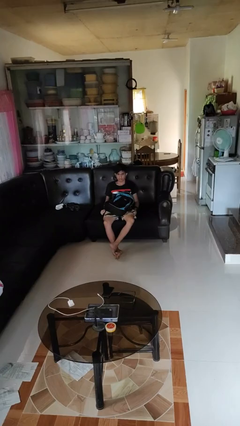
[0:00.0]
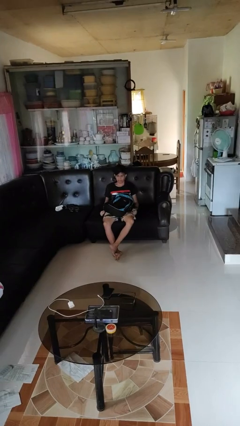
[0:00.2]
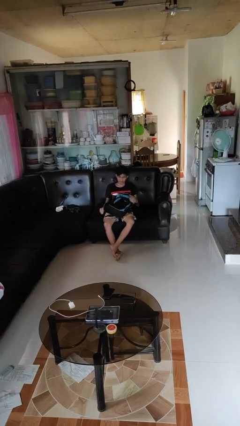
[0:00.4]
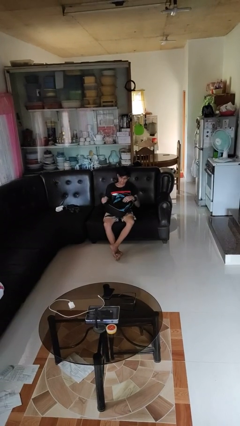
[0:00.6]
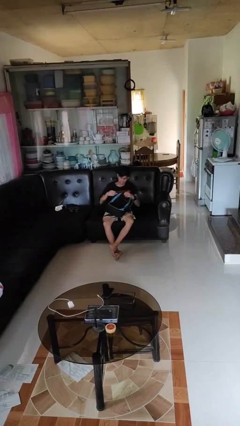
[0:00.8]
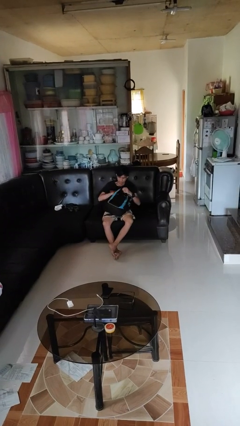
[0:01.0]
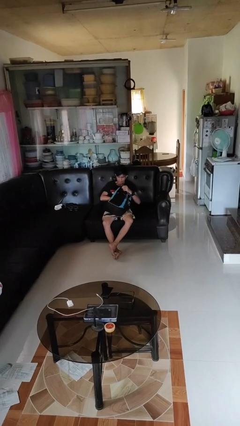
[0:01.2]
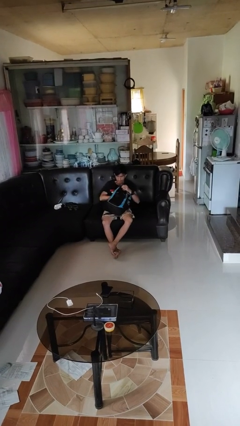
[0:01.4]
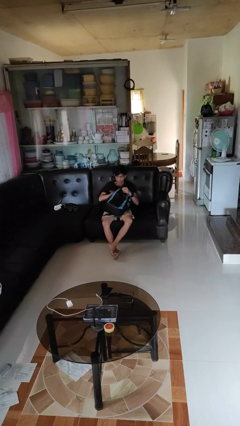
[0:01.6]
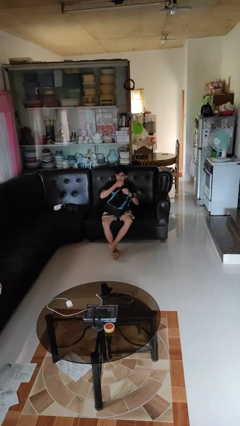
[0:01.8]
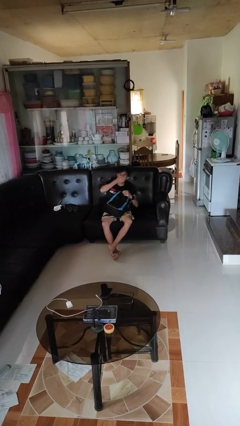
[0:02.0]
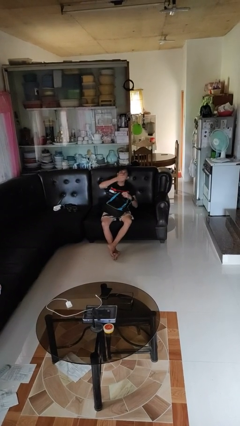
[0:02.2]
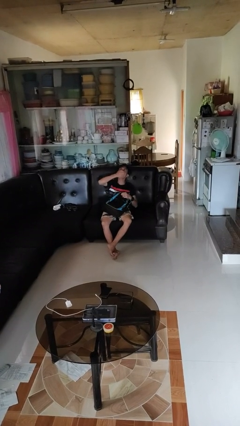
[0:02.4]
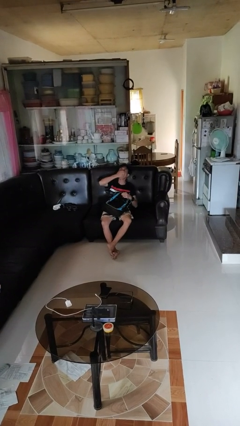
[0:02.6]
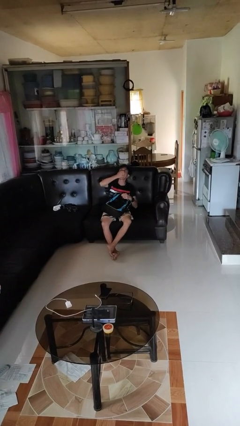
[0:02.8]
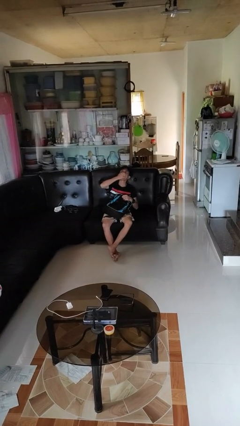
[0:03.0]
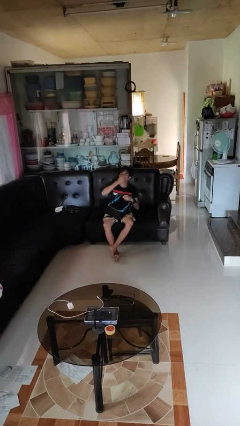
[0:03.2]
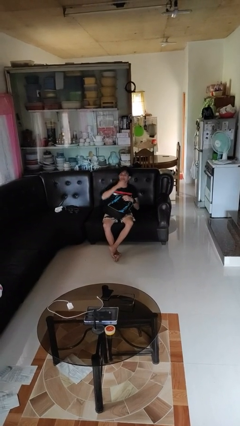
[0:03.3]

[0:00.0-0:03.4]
person eats snack from bag

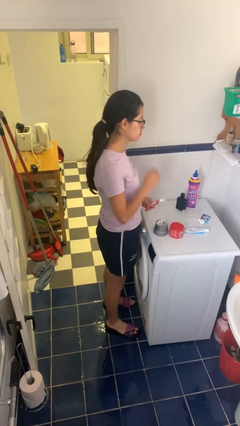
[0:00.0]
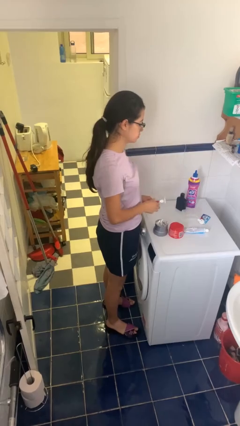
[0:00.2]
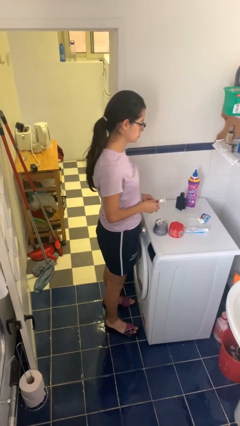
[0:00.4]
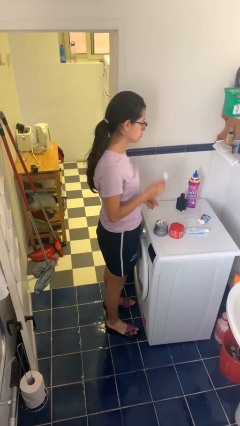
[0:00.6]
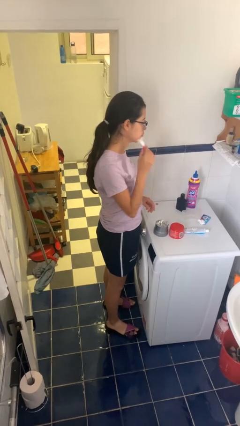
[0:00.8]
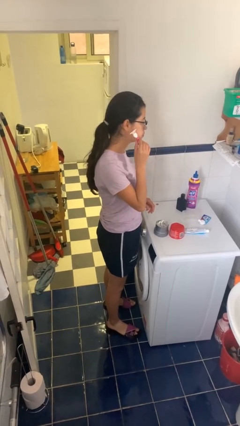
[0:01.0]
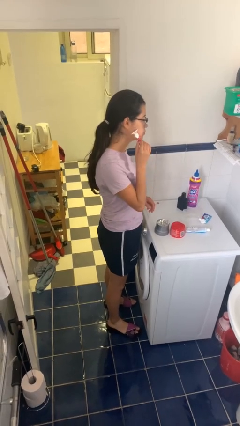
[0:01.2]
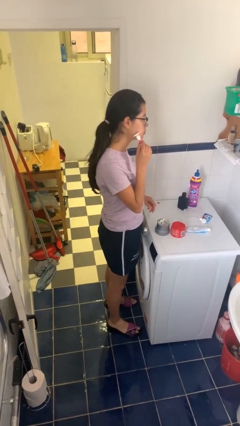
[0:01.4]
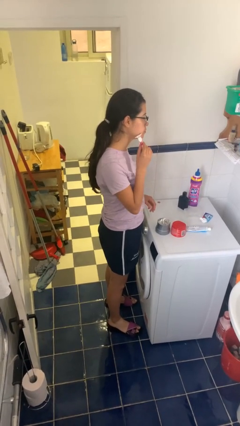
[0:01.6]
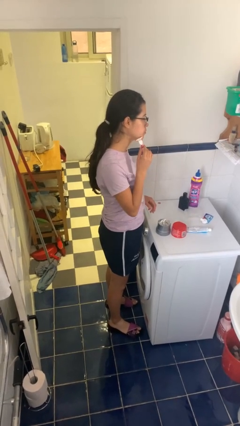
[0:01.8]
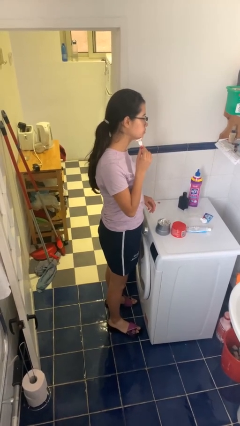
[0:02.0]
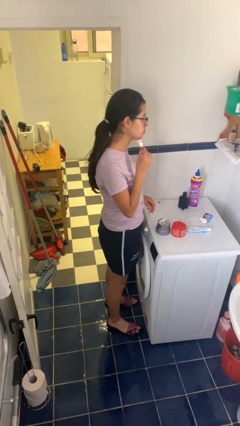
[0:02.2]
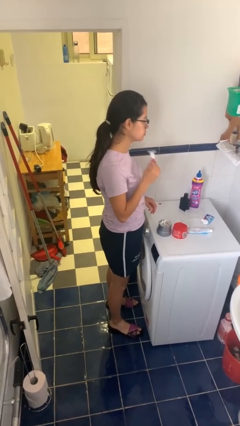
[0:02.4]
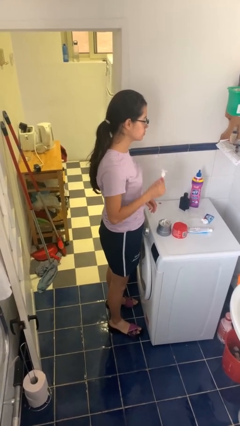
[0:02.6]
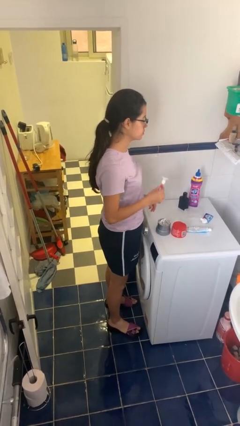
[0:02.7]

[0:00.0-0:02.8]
person shaves face

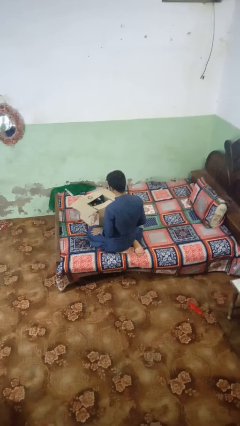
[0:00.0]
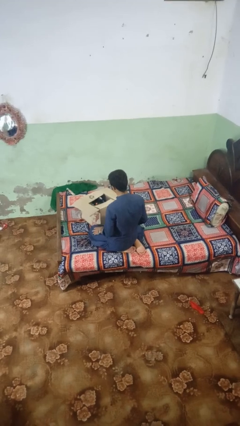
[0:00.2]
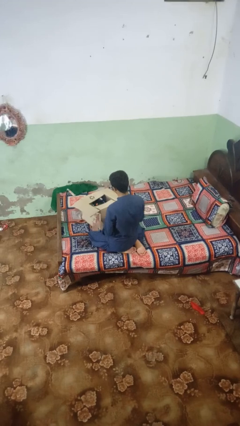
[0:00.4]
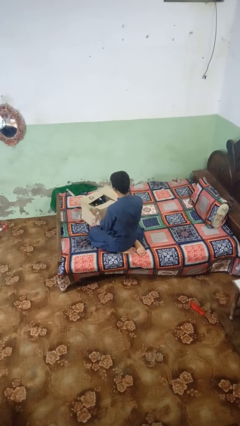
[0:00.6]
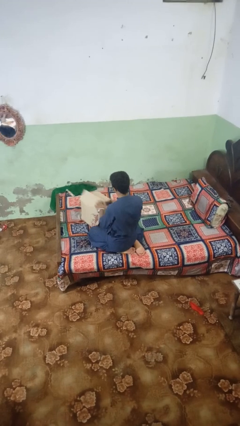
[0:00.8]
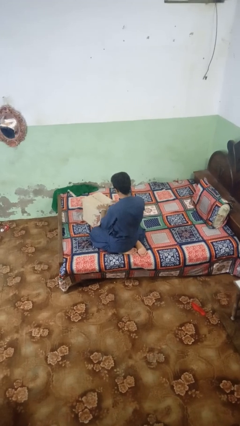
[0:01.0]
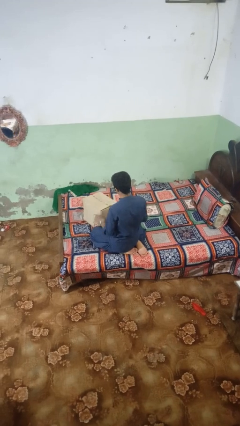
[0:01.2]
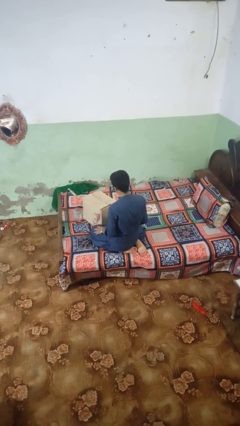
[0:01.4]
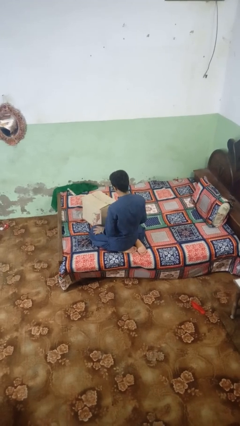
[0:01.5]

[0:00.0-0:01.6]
person closes box

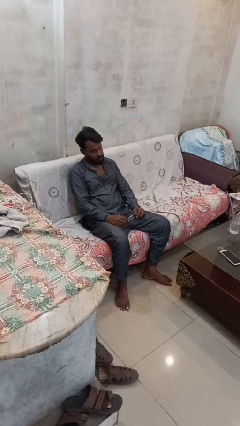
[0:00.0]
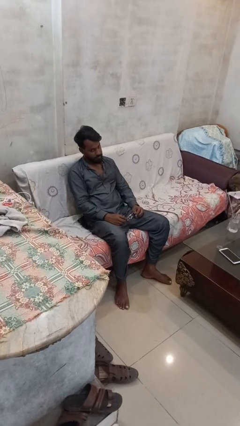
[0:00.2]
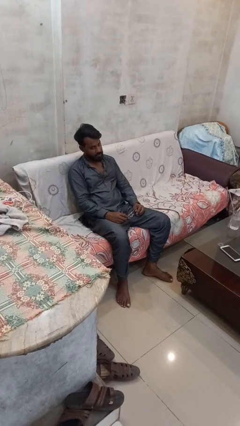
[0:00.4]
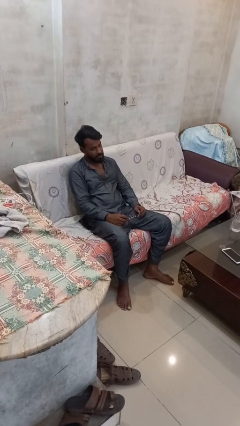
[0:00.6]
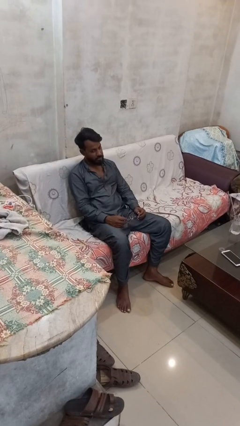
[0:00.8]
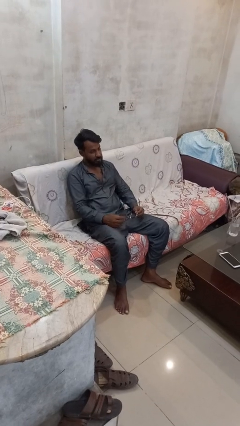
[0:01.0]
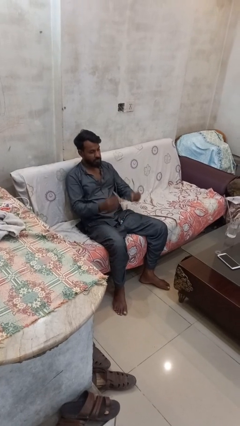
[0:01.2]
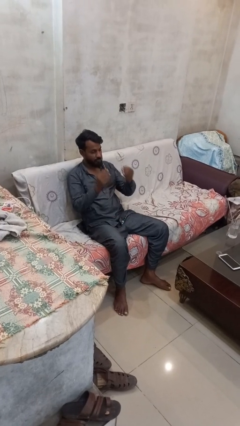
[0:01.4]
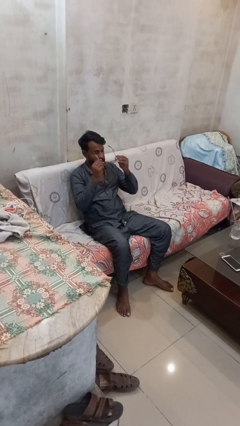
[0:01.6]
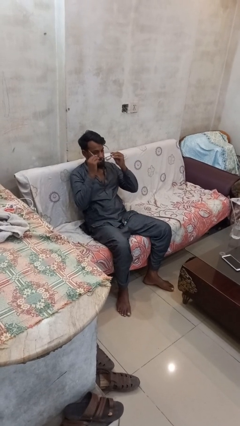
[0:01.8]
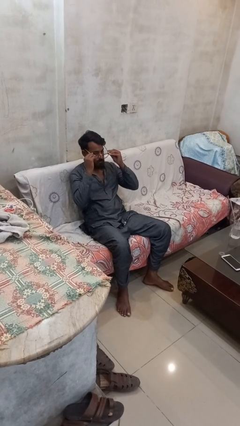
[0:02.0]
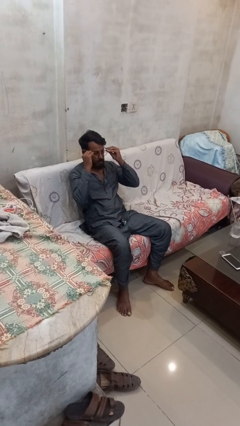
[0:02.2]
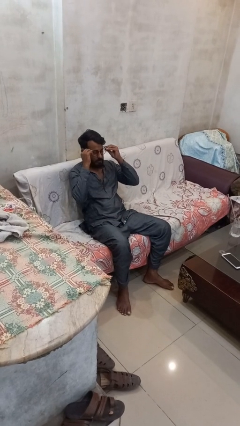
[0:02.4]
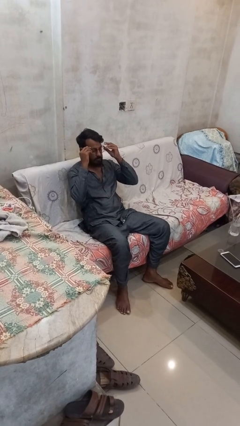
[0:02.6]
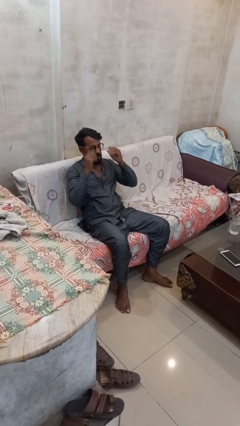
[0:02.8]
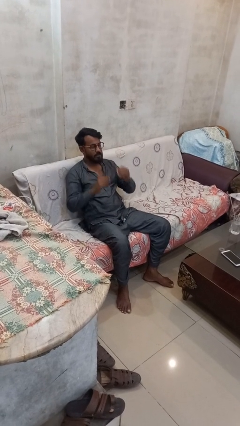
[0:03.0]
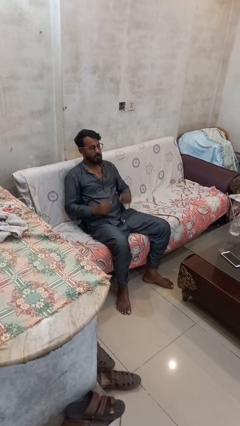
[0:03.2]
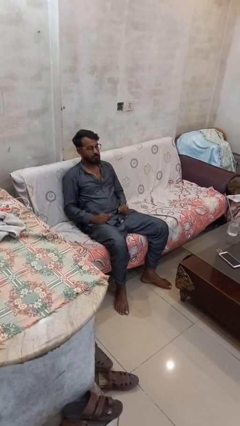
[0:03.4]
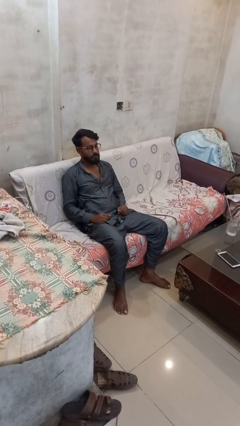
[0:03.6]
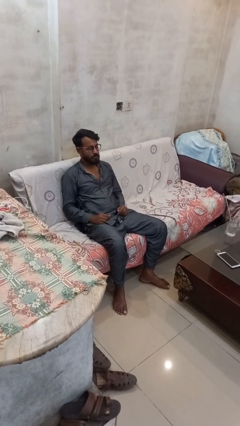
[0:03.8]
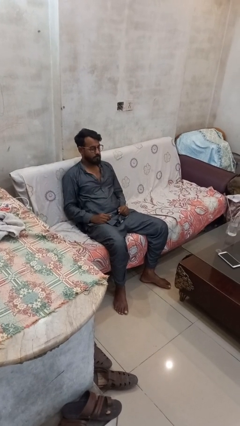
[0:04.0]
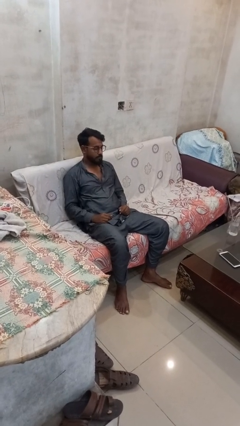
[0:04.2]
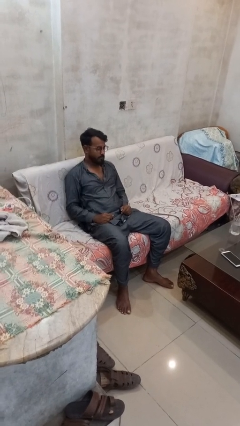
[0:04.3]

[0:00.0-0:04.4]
person puts on glasses

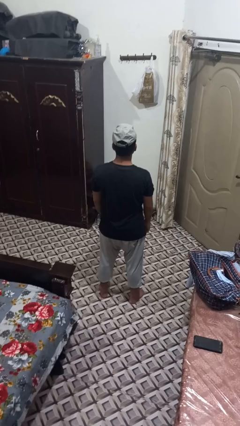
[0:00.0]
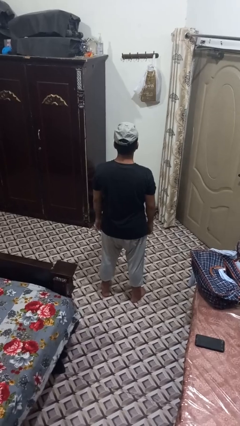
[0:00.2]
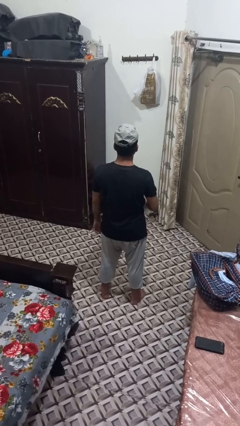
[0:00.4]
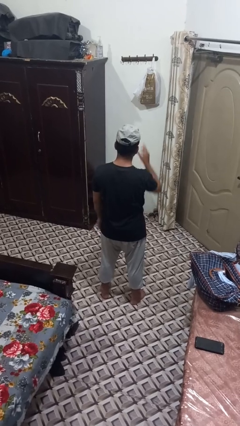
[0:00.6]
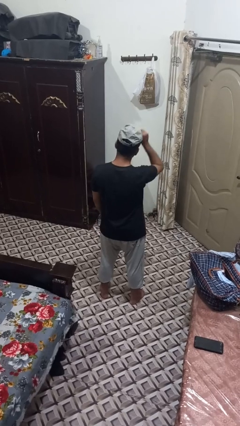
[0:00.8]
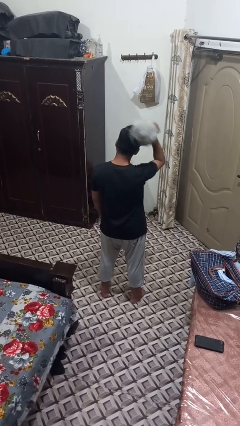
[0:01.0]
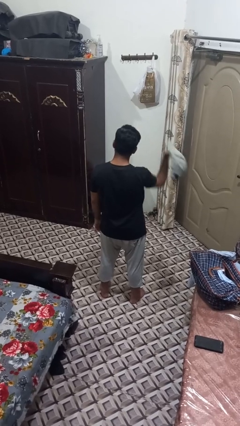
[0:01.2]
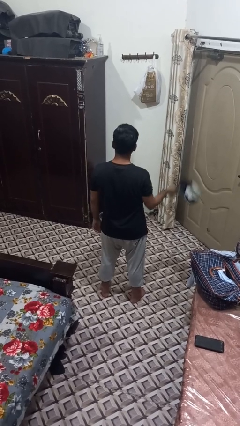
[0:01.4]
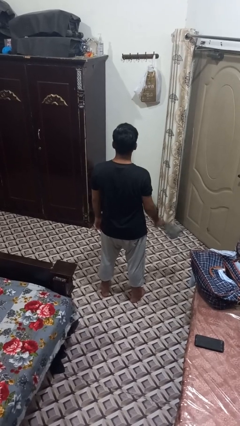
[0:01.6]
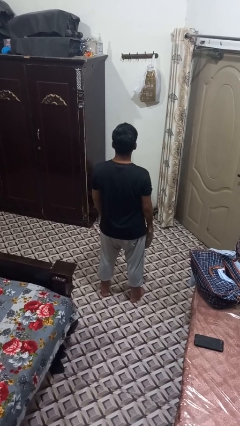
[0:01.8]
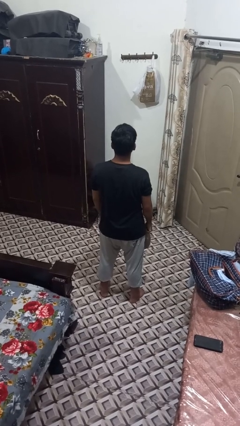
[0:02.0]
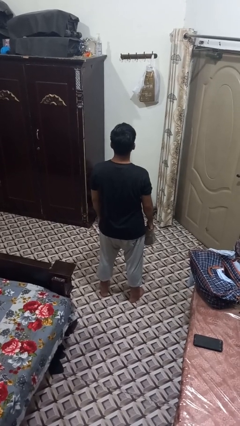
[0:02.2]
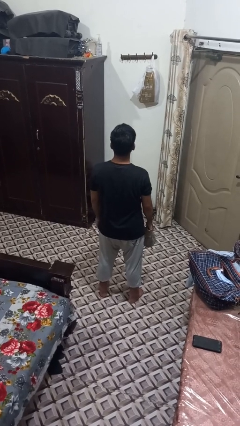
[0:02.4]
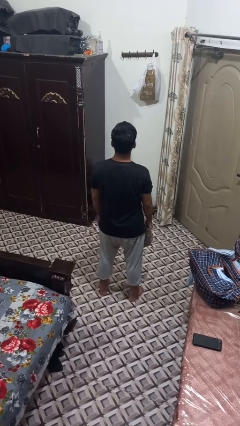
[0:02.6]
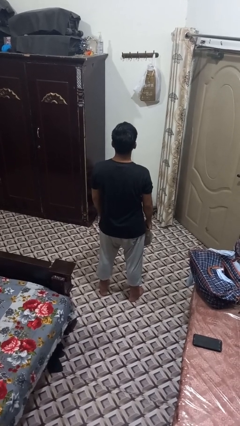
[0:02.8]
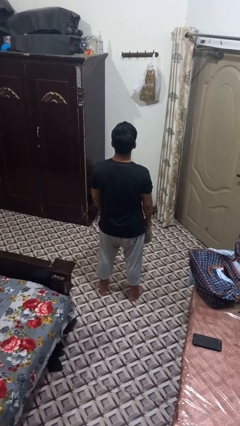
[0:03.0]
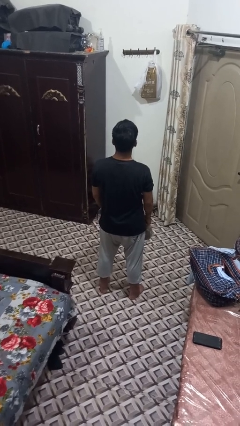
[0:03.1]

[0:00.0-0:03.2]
person takes off hat

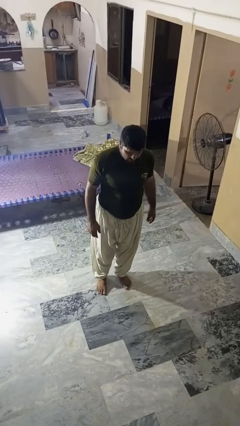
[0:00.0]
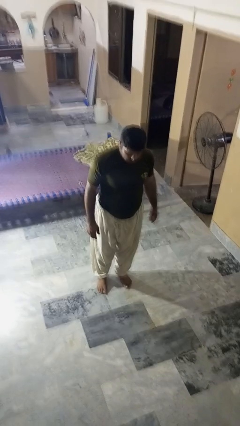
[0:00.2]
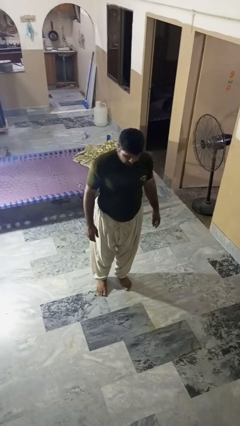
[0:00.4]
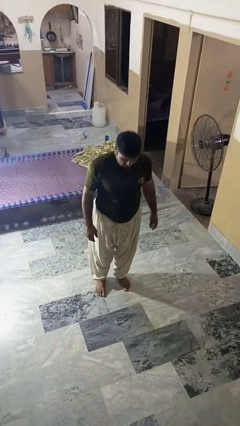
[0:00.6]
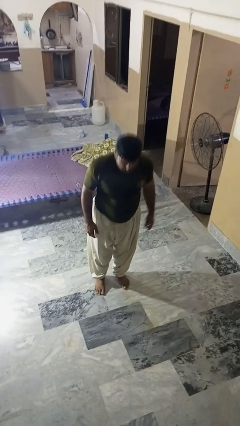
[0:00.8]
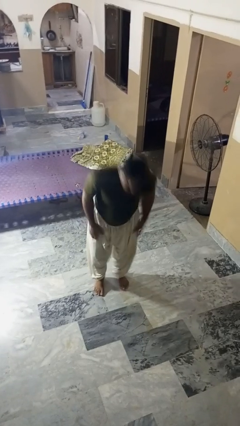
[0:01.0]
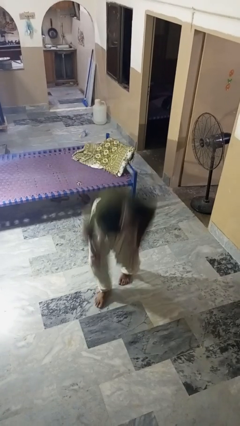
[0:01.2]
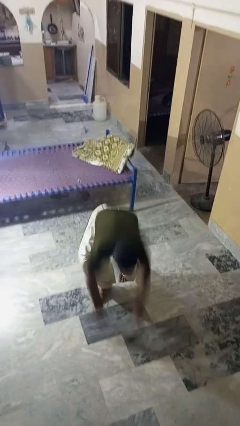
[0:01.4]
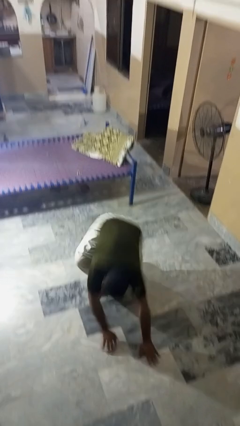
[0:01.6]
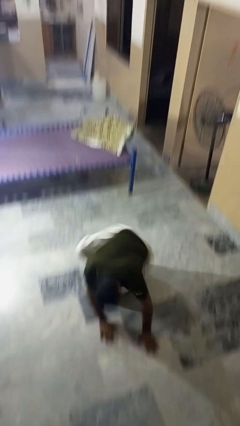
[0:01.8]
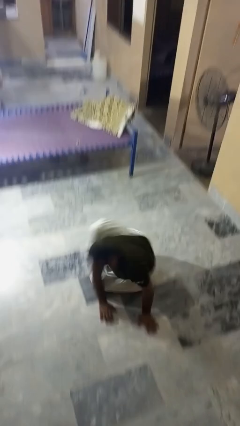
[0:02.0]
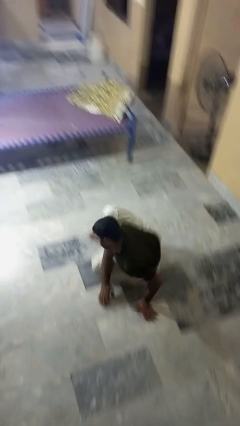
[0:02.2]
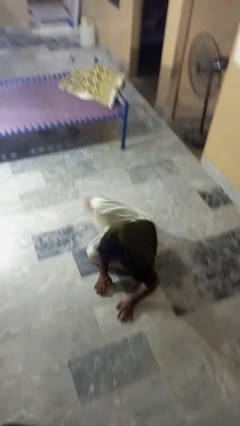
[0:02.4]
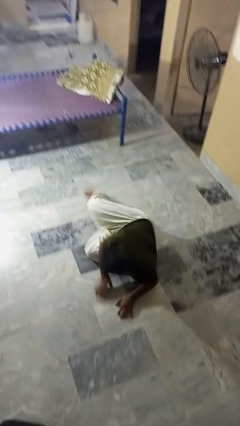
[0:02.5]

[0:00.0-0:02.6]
person falls while standing
